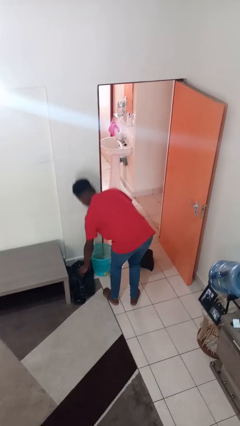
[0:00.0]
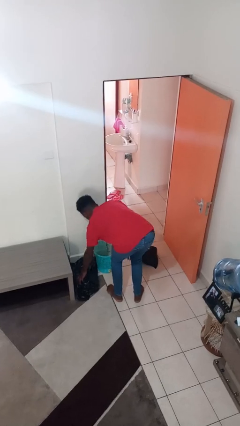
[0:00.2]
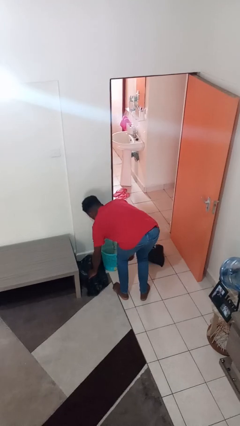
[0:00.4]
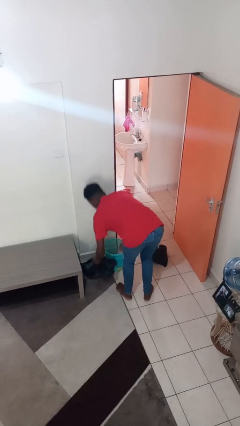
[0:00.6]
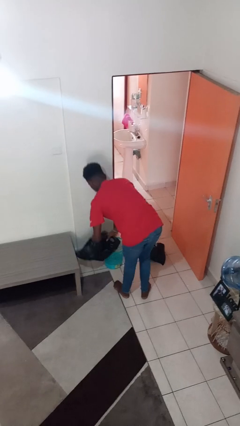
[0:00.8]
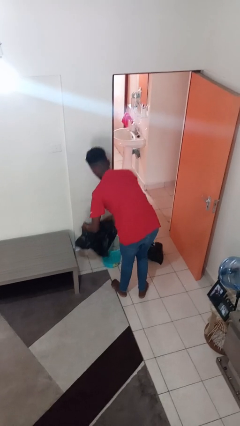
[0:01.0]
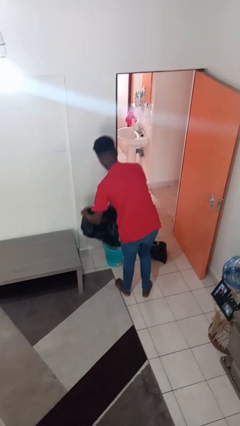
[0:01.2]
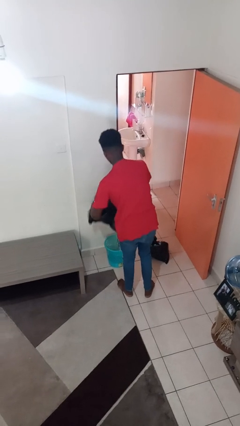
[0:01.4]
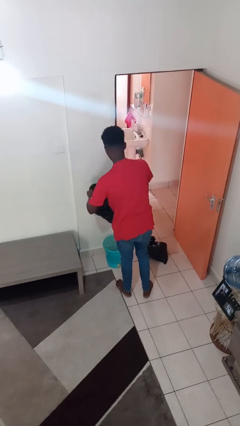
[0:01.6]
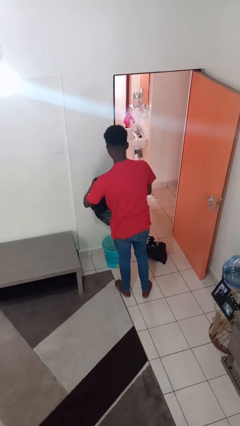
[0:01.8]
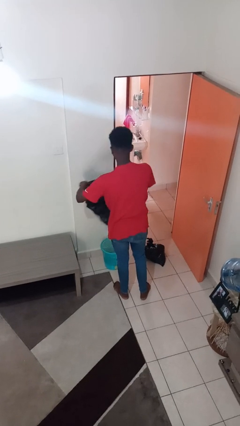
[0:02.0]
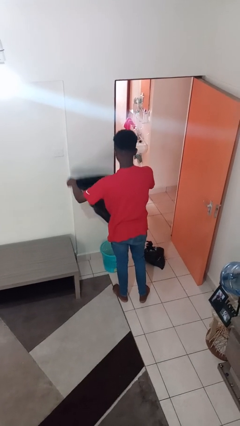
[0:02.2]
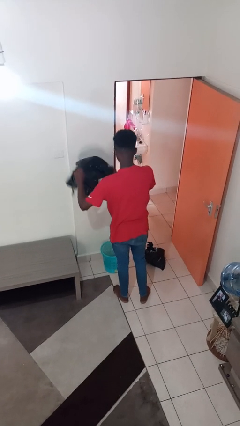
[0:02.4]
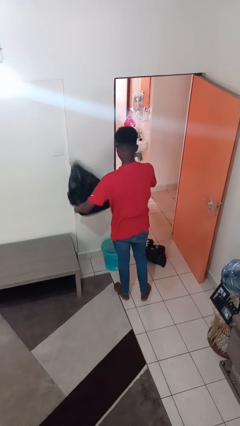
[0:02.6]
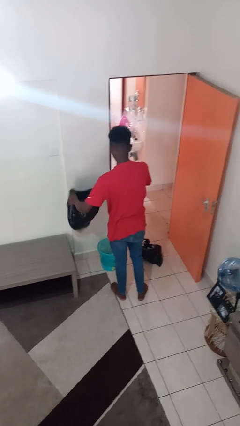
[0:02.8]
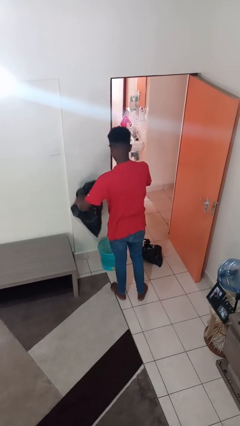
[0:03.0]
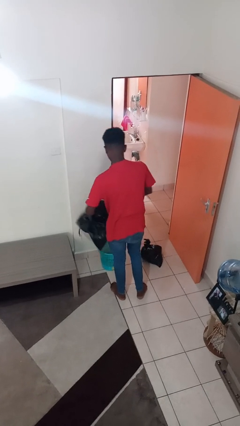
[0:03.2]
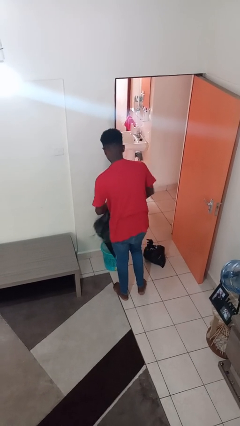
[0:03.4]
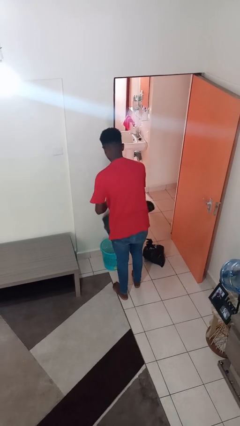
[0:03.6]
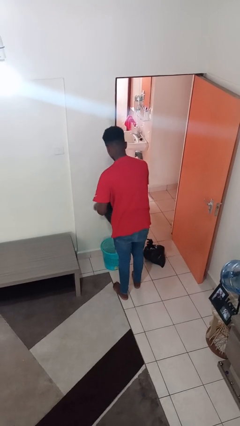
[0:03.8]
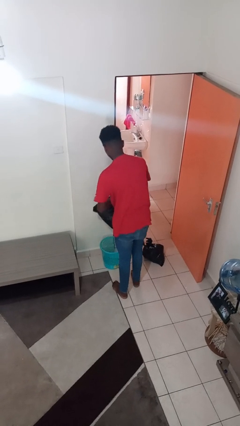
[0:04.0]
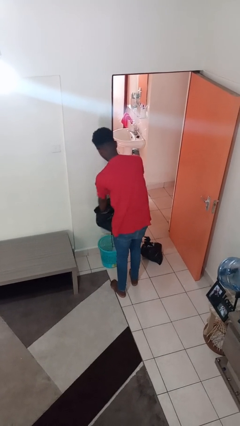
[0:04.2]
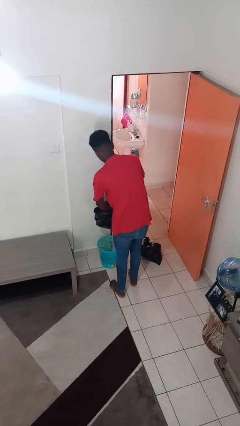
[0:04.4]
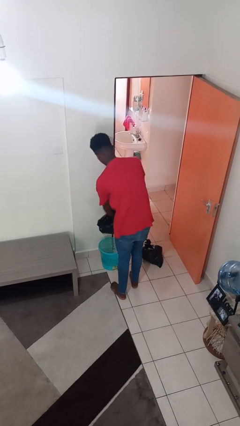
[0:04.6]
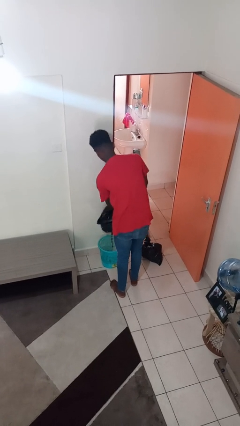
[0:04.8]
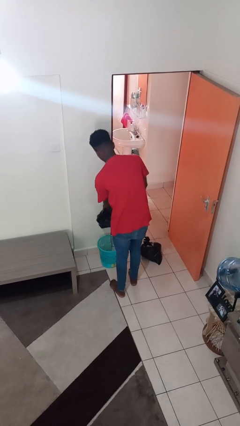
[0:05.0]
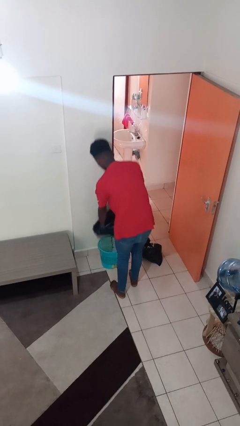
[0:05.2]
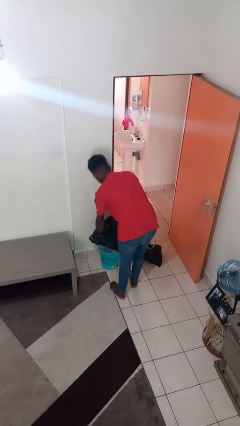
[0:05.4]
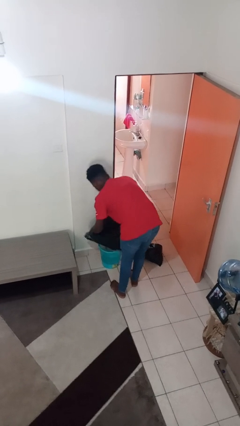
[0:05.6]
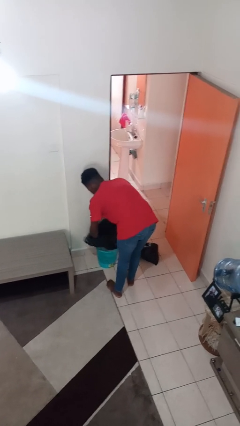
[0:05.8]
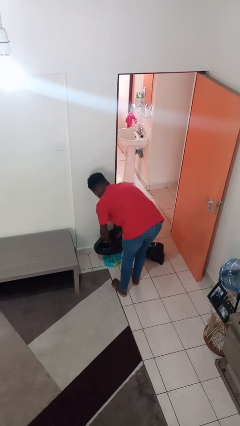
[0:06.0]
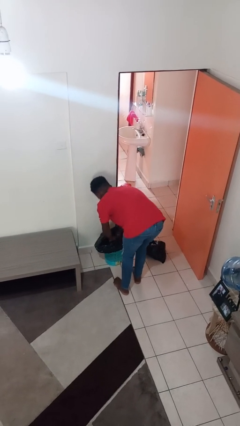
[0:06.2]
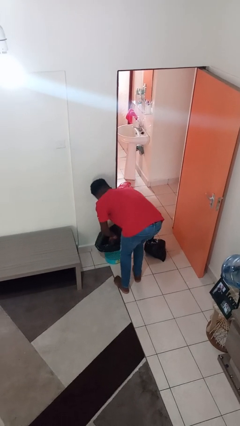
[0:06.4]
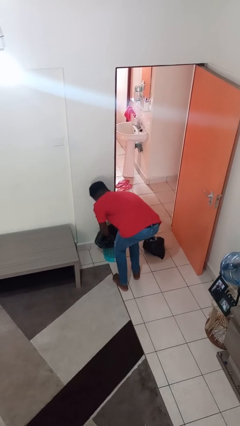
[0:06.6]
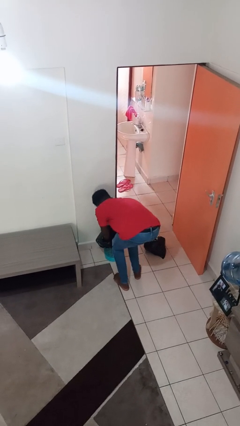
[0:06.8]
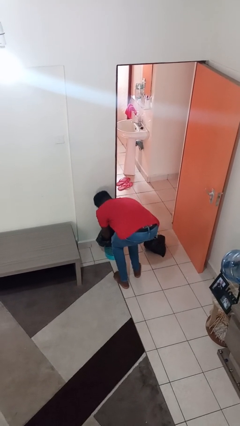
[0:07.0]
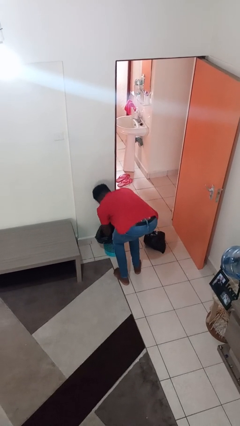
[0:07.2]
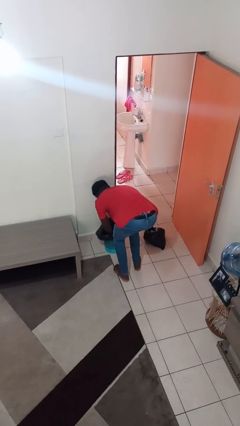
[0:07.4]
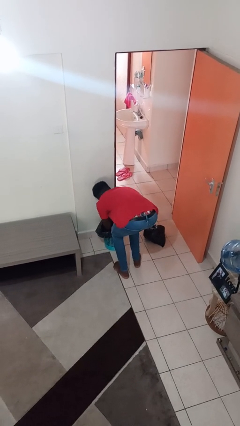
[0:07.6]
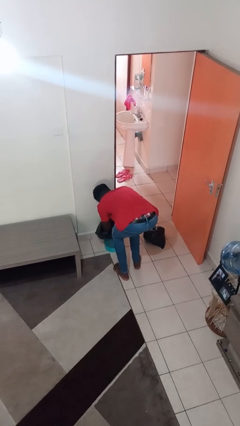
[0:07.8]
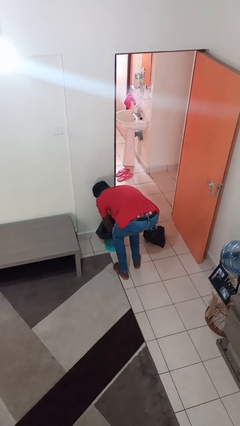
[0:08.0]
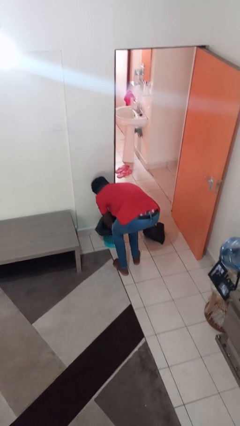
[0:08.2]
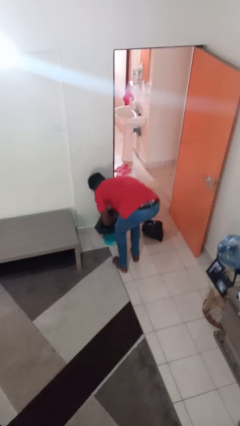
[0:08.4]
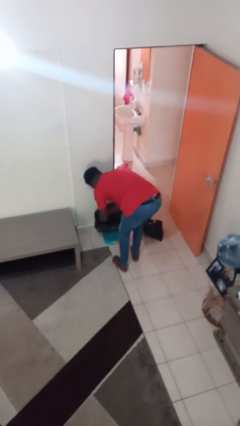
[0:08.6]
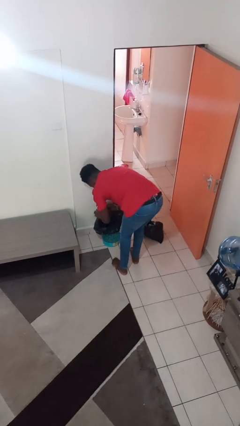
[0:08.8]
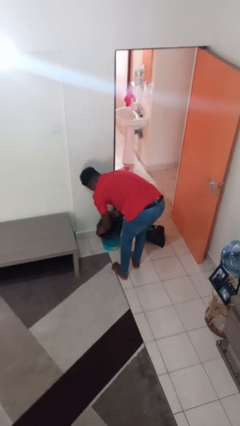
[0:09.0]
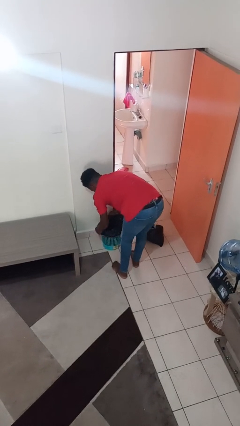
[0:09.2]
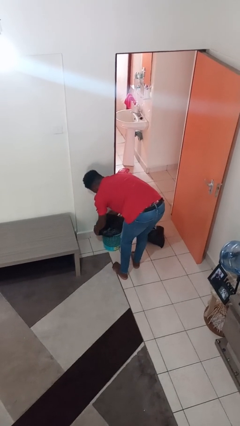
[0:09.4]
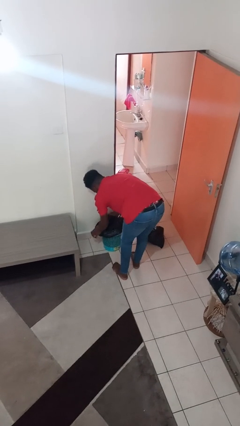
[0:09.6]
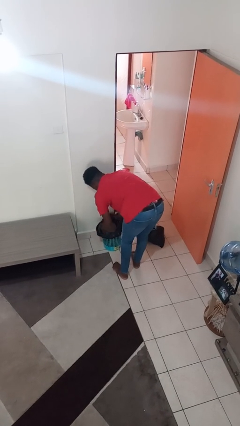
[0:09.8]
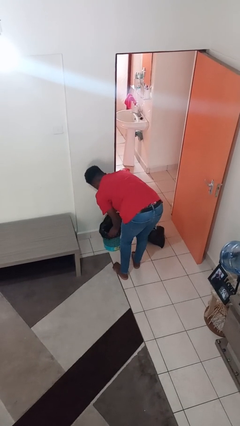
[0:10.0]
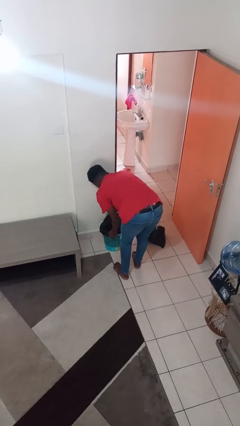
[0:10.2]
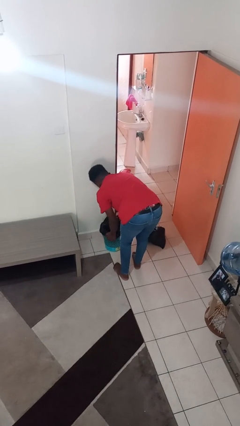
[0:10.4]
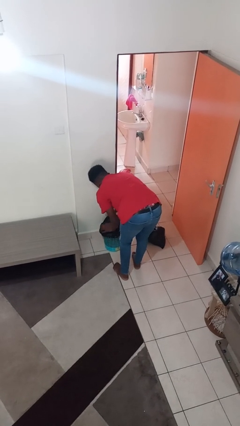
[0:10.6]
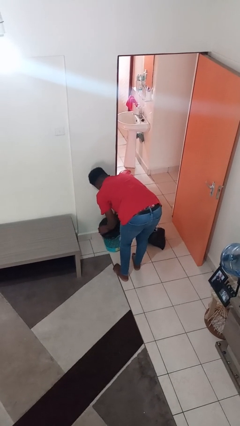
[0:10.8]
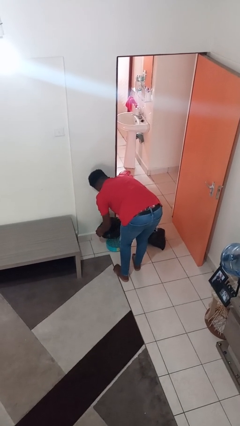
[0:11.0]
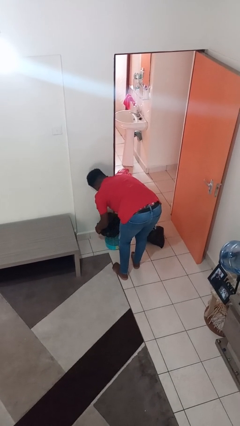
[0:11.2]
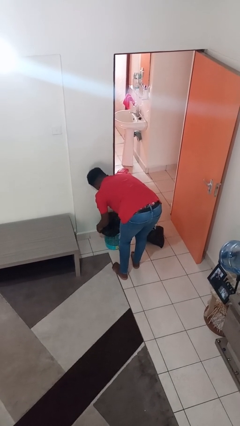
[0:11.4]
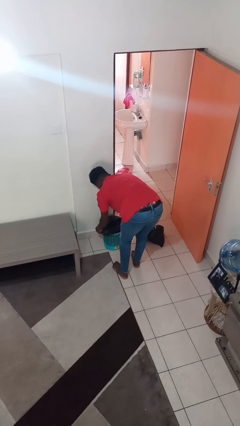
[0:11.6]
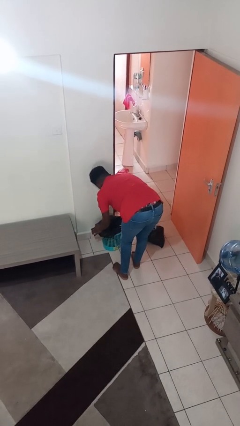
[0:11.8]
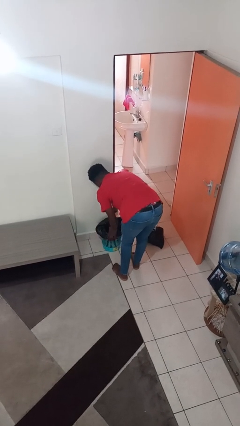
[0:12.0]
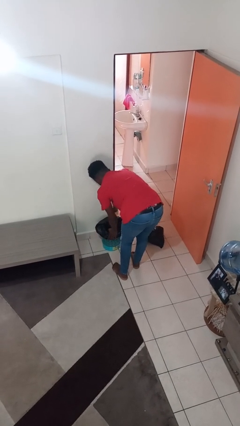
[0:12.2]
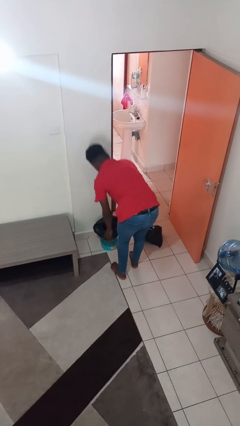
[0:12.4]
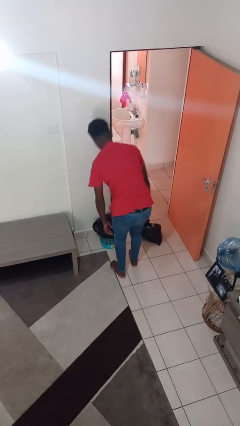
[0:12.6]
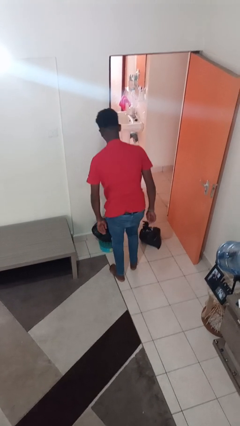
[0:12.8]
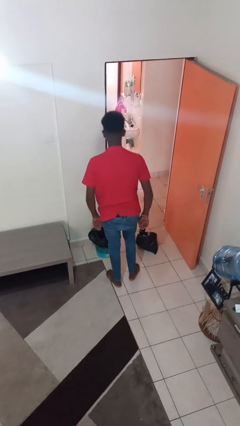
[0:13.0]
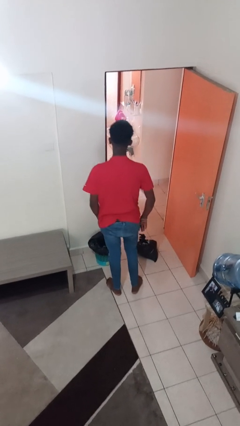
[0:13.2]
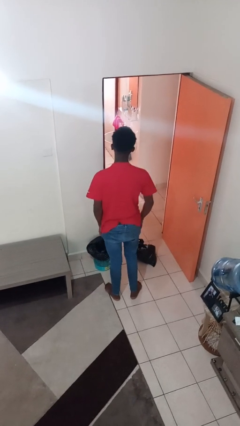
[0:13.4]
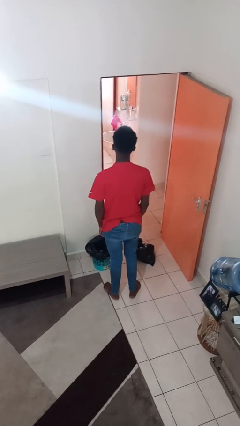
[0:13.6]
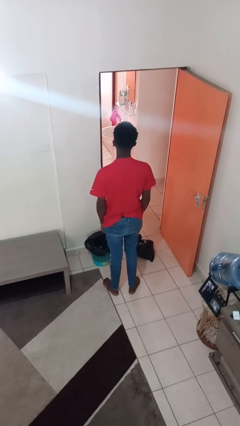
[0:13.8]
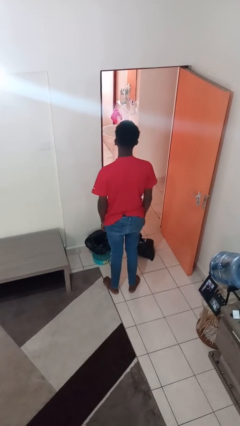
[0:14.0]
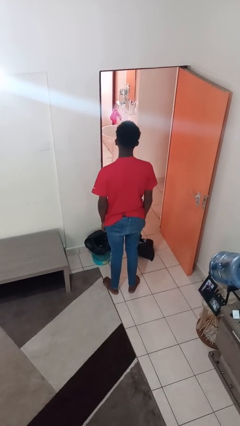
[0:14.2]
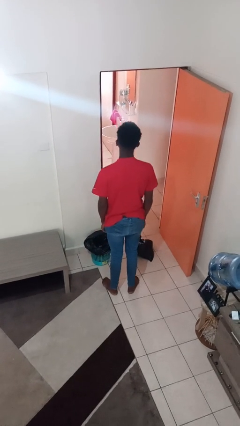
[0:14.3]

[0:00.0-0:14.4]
person inserts trashbag into trashcan

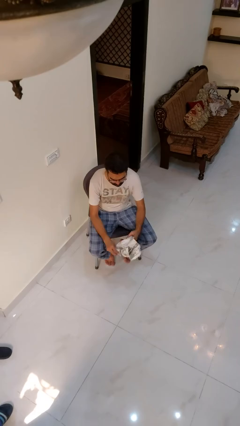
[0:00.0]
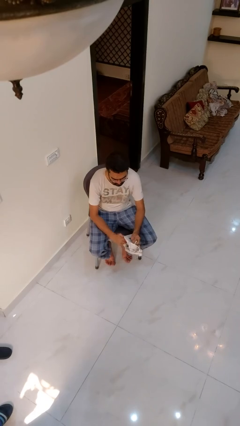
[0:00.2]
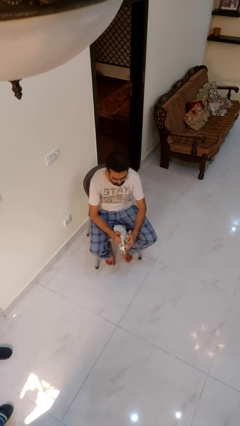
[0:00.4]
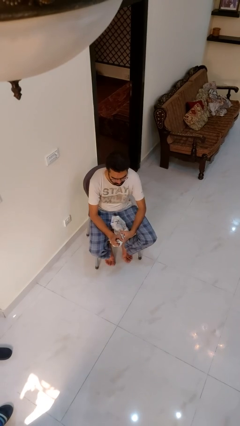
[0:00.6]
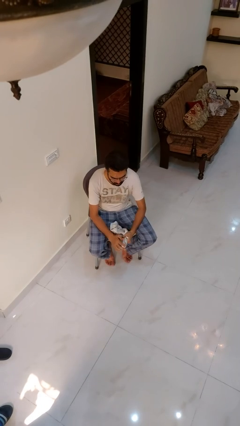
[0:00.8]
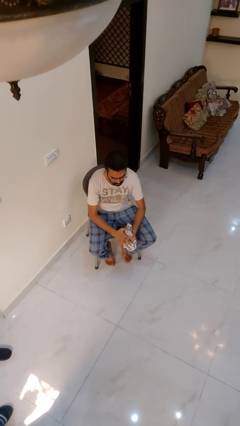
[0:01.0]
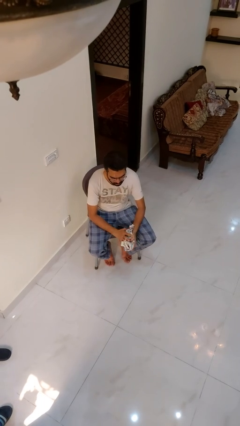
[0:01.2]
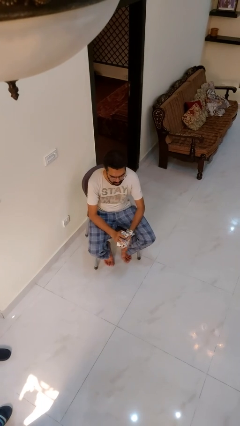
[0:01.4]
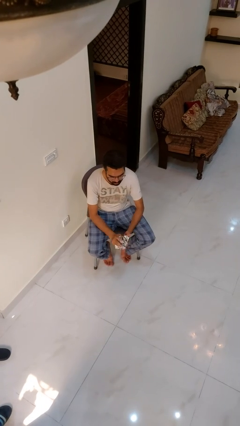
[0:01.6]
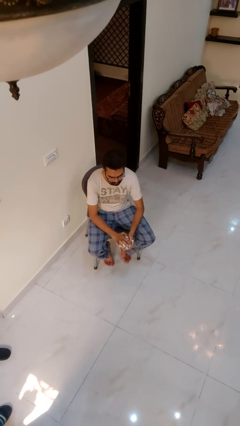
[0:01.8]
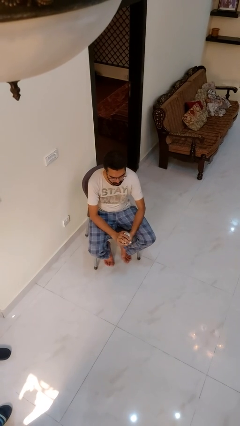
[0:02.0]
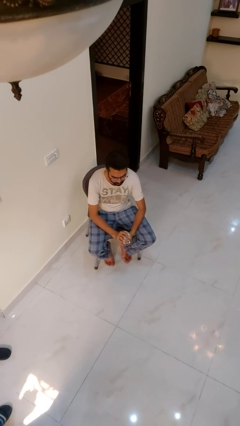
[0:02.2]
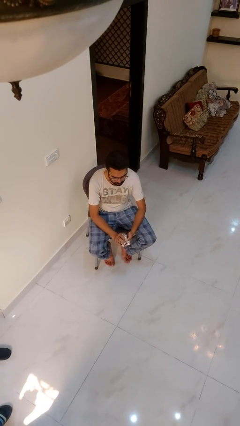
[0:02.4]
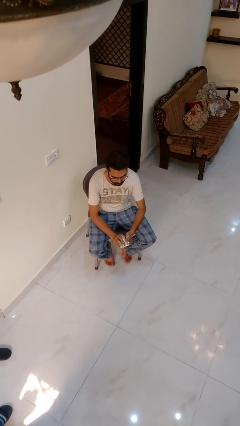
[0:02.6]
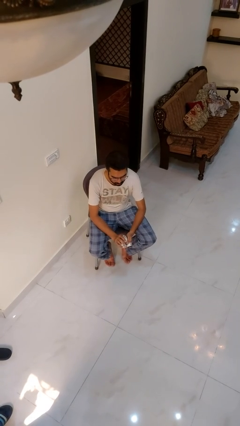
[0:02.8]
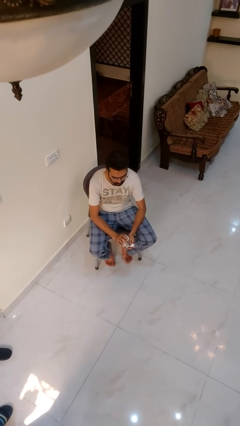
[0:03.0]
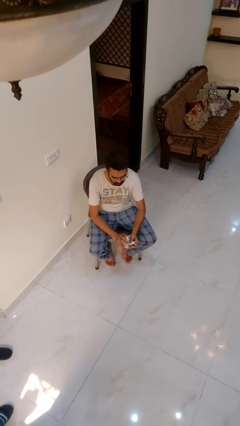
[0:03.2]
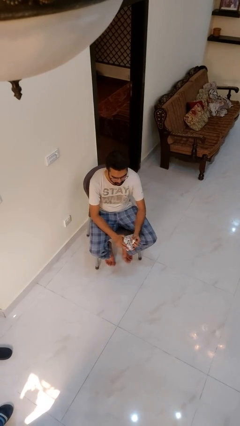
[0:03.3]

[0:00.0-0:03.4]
person crumples paper

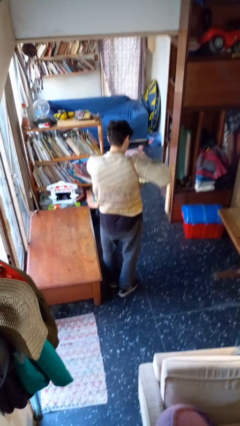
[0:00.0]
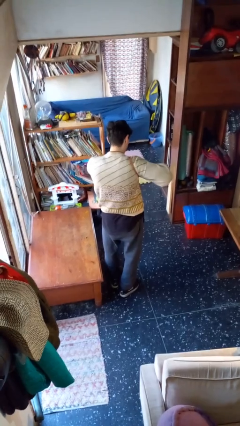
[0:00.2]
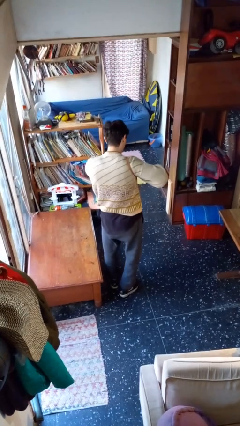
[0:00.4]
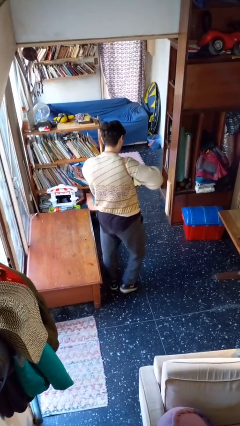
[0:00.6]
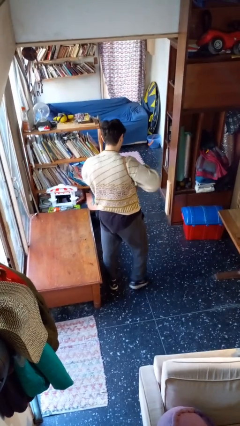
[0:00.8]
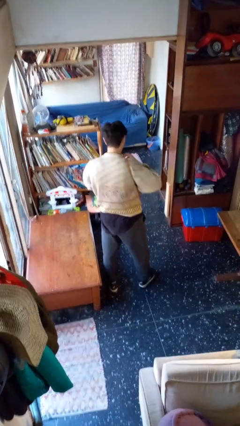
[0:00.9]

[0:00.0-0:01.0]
person puts object into purse
